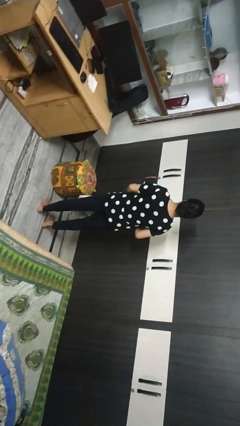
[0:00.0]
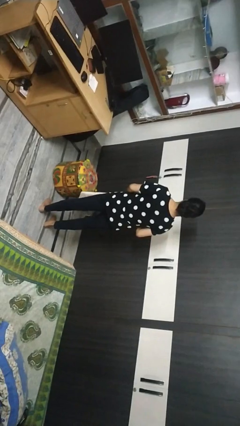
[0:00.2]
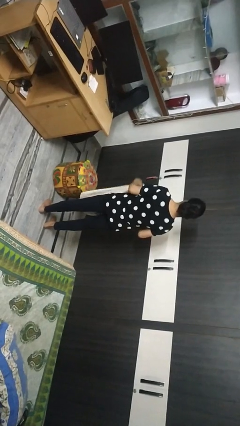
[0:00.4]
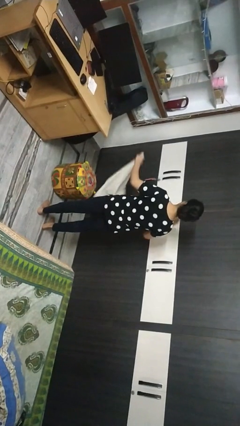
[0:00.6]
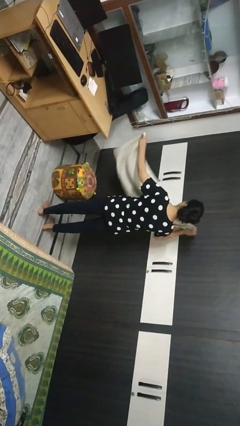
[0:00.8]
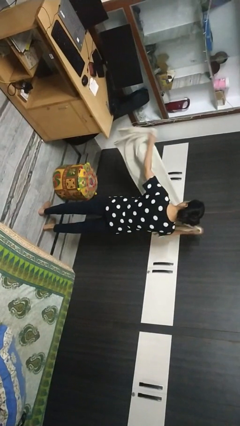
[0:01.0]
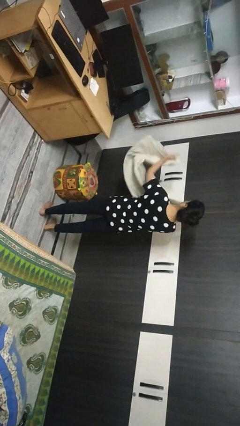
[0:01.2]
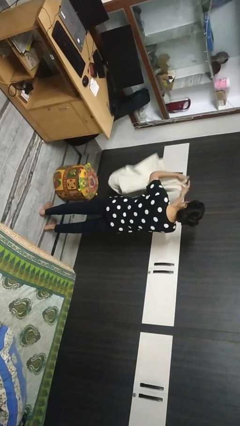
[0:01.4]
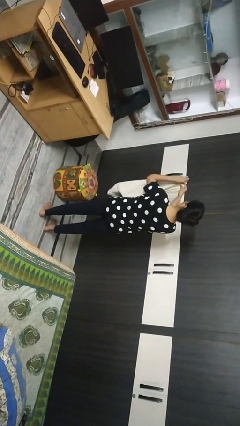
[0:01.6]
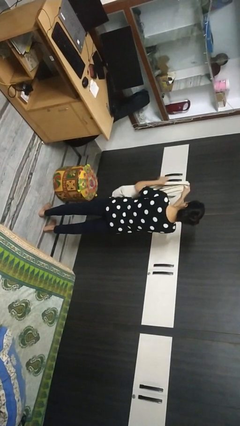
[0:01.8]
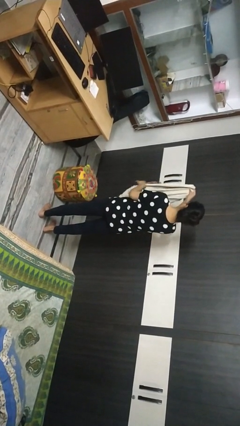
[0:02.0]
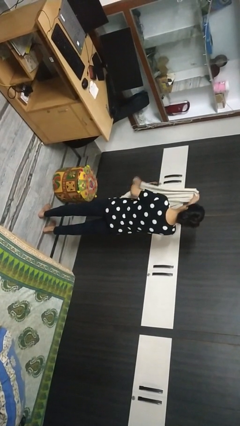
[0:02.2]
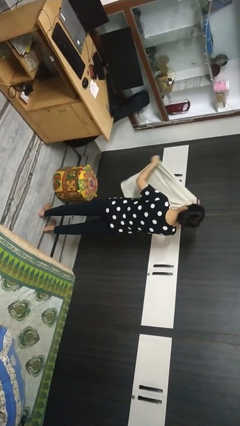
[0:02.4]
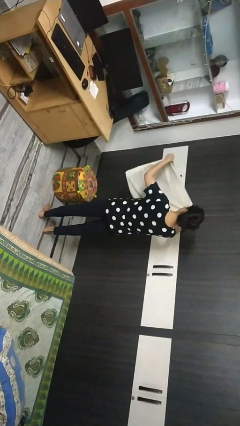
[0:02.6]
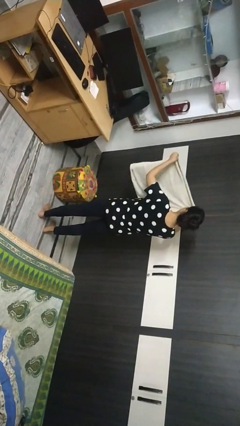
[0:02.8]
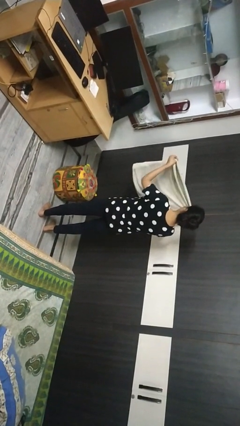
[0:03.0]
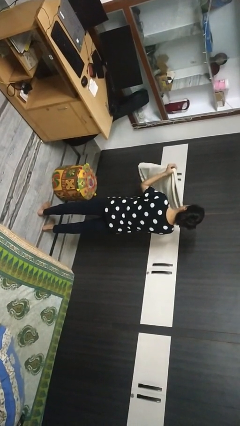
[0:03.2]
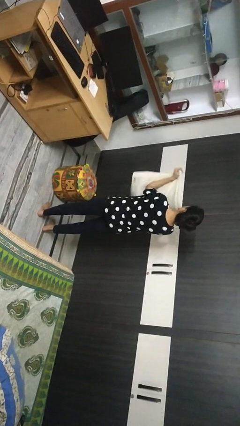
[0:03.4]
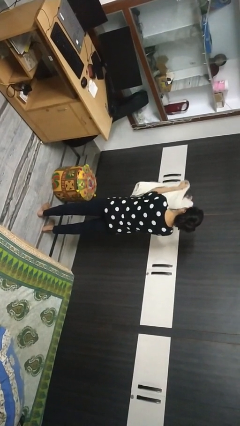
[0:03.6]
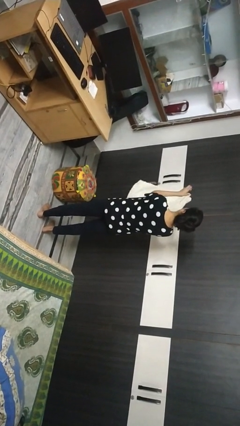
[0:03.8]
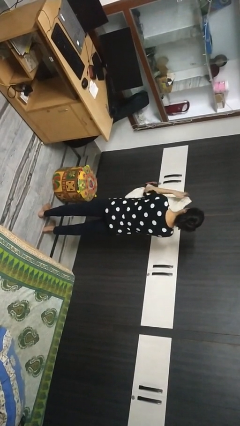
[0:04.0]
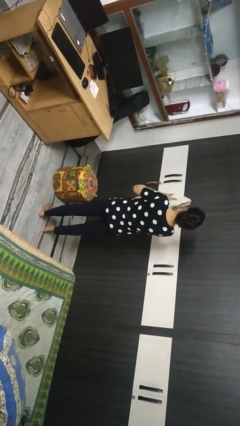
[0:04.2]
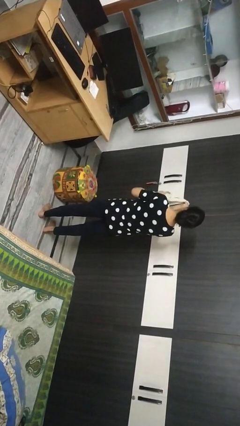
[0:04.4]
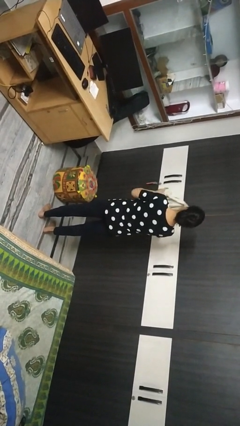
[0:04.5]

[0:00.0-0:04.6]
person folds blanket

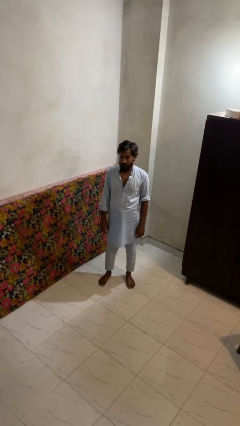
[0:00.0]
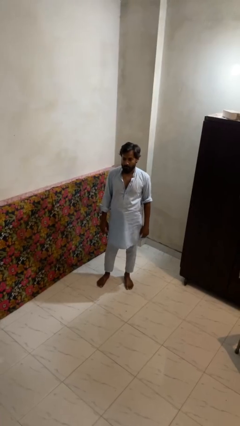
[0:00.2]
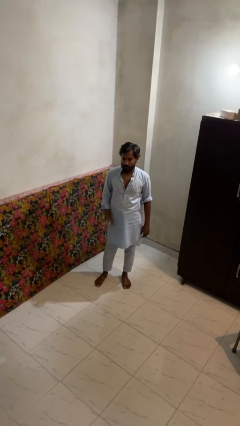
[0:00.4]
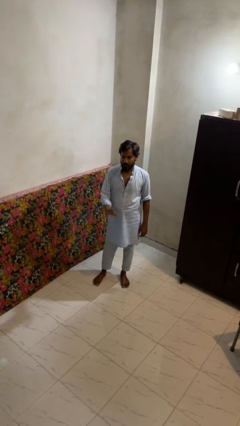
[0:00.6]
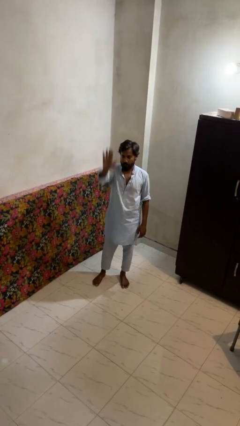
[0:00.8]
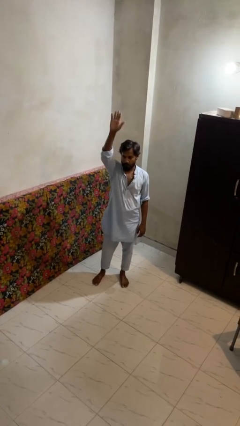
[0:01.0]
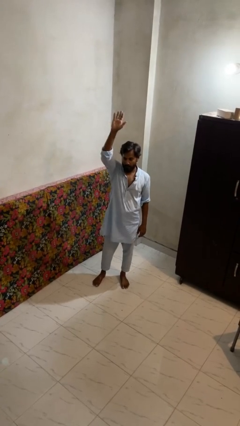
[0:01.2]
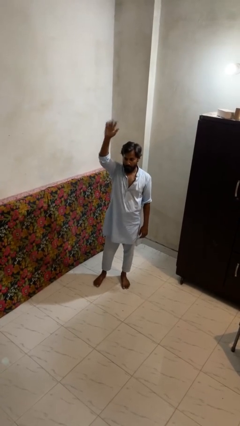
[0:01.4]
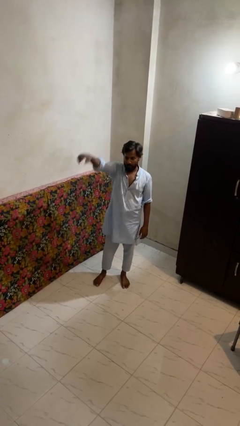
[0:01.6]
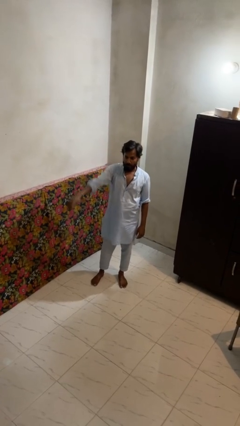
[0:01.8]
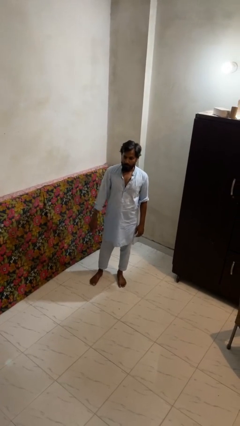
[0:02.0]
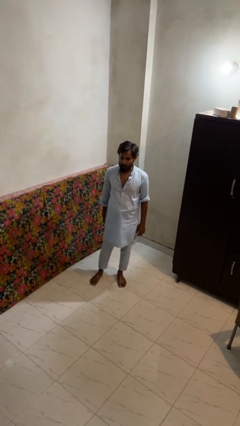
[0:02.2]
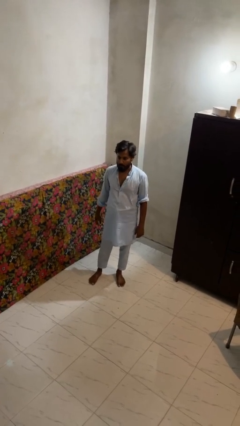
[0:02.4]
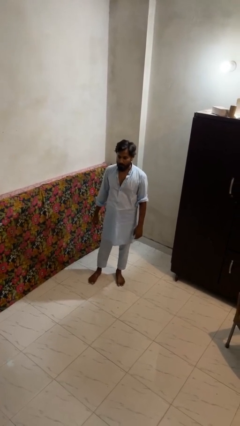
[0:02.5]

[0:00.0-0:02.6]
person gestures swipe up

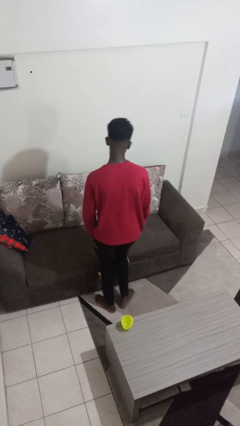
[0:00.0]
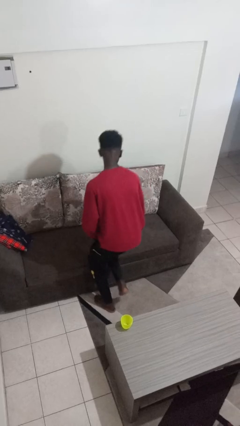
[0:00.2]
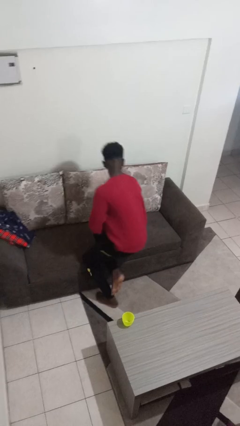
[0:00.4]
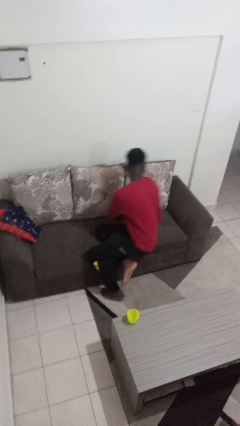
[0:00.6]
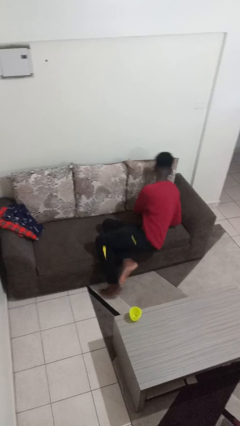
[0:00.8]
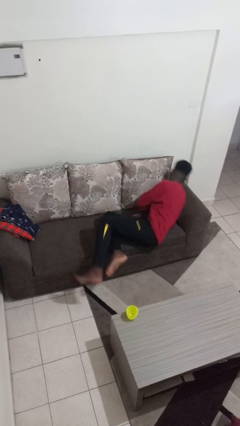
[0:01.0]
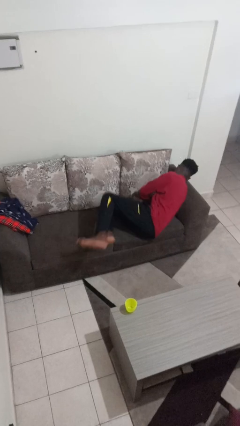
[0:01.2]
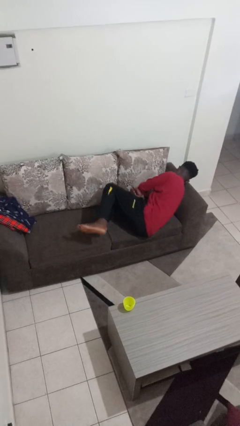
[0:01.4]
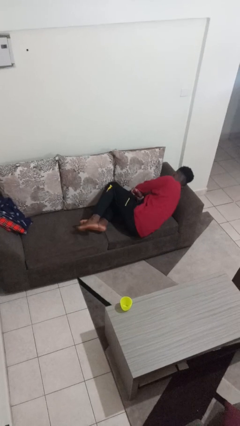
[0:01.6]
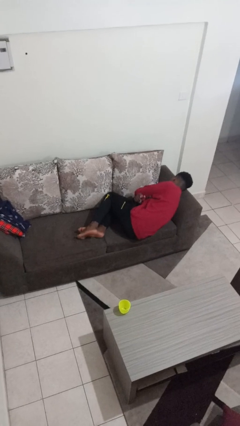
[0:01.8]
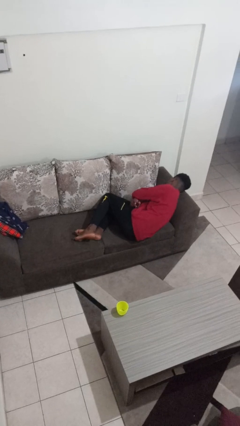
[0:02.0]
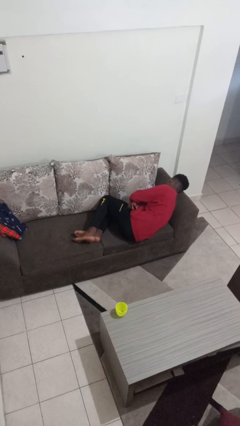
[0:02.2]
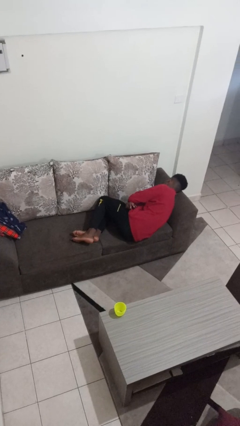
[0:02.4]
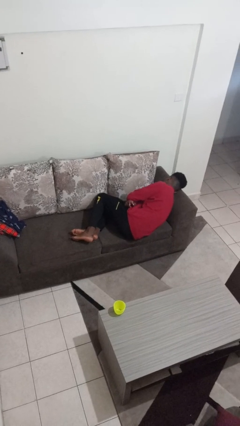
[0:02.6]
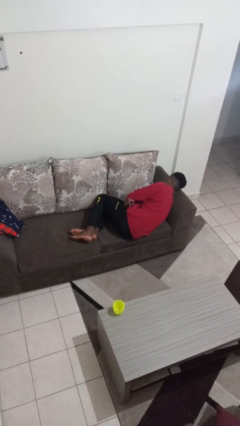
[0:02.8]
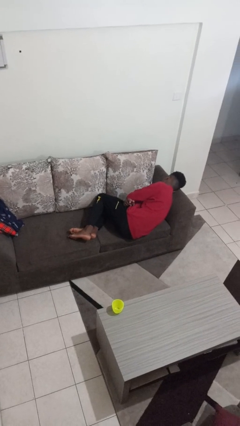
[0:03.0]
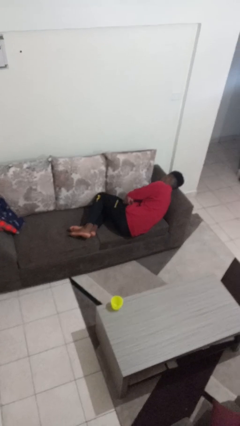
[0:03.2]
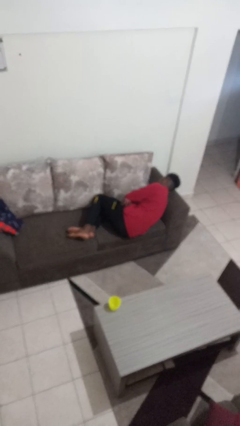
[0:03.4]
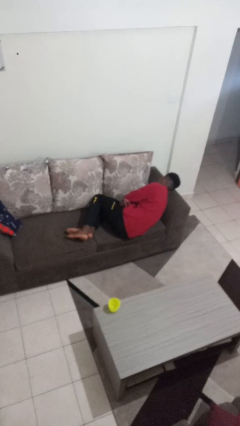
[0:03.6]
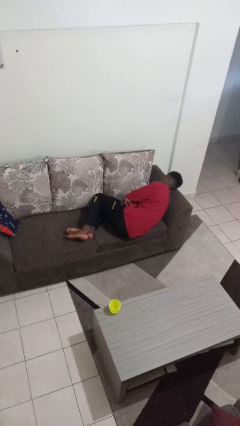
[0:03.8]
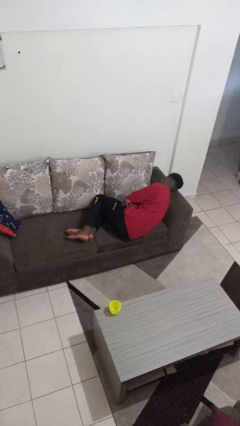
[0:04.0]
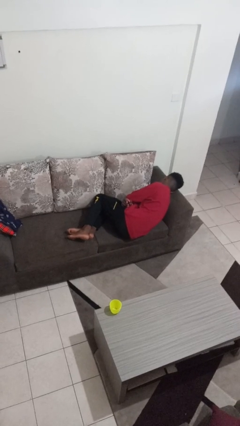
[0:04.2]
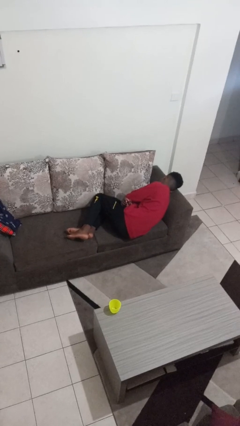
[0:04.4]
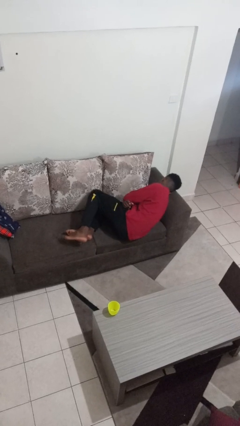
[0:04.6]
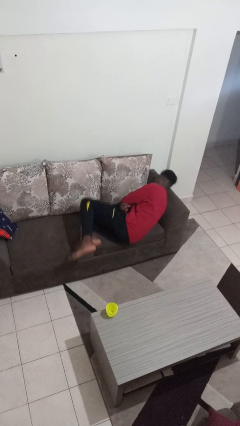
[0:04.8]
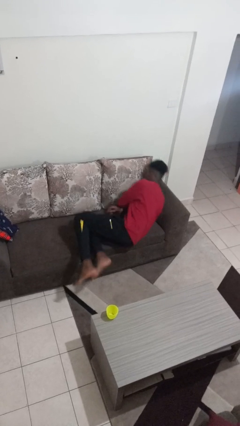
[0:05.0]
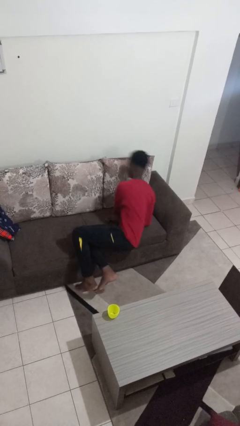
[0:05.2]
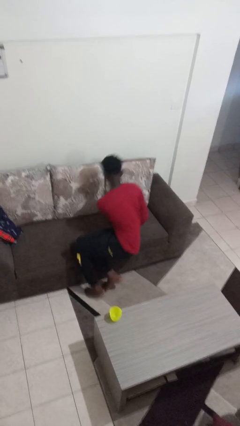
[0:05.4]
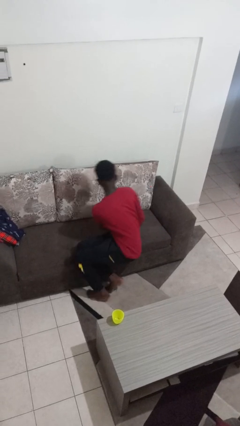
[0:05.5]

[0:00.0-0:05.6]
person lies down on couch

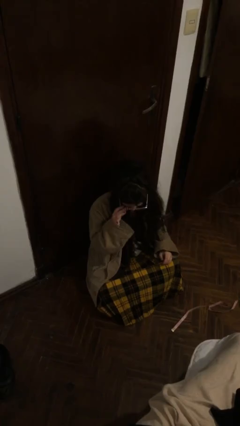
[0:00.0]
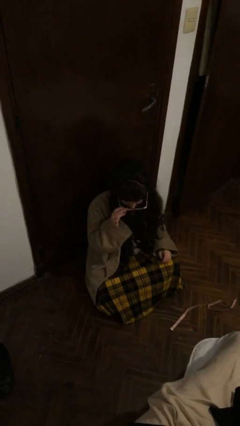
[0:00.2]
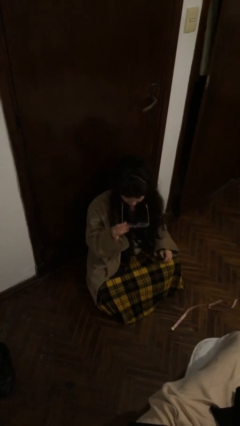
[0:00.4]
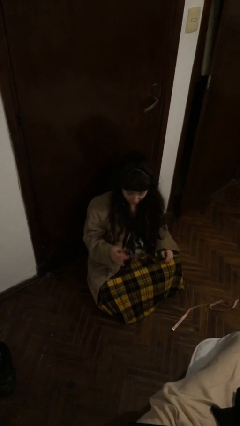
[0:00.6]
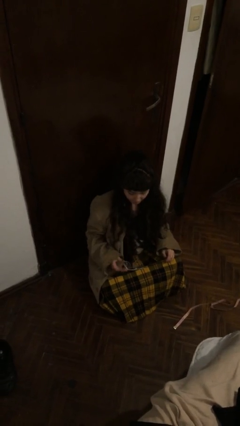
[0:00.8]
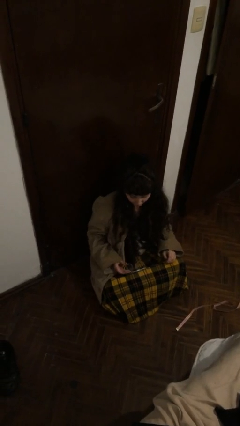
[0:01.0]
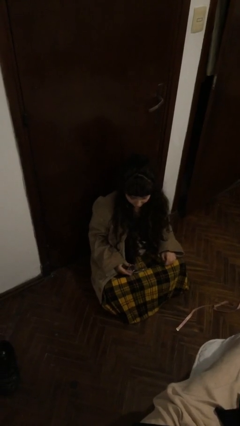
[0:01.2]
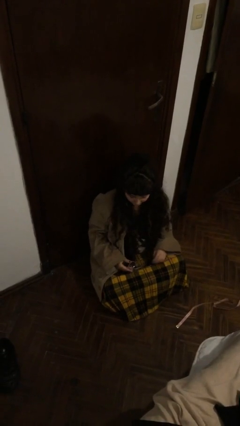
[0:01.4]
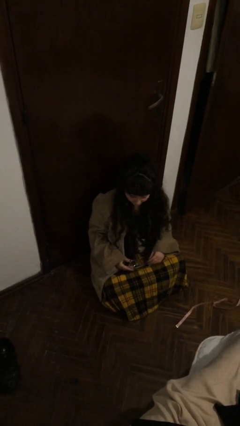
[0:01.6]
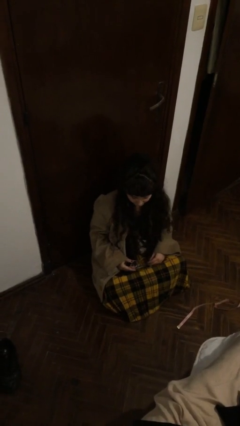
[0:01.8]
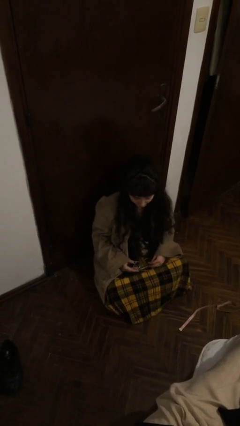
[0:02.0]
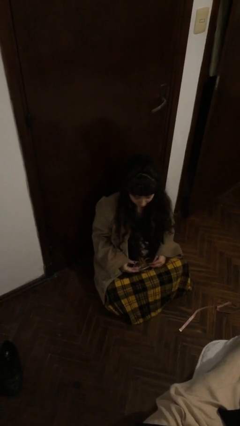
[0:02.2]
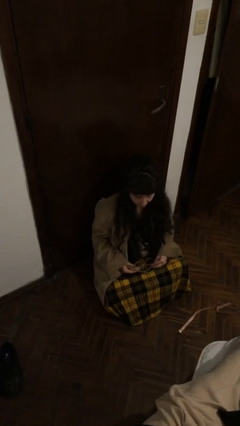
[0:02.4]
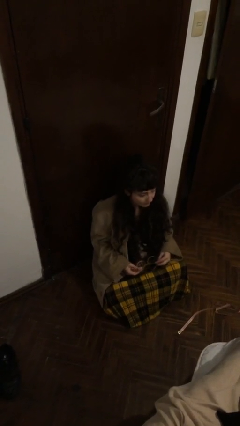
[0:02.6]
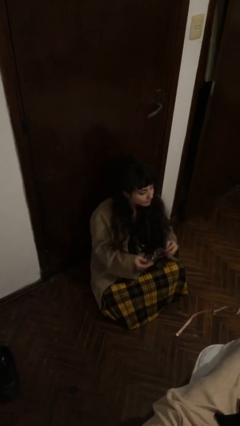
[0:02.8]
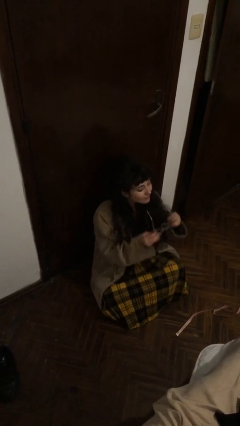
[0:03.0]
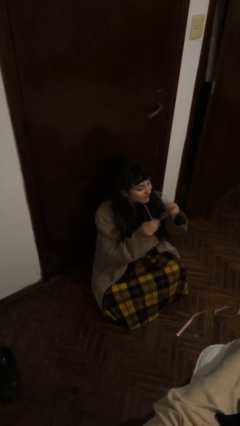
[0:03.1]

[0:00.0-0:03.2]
person takes off glasses

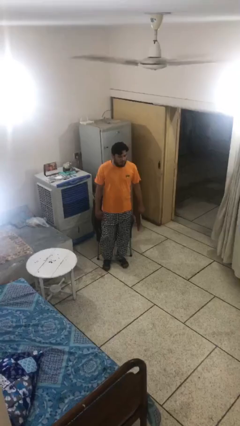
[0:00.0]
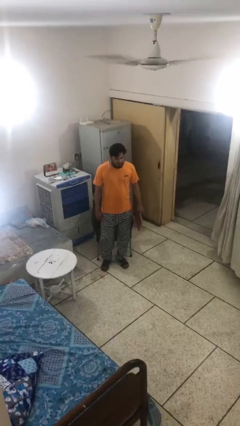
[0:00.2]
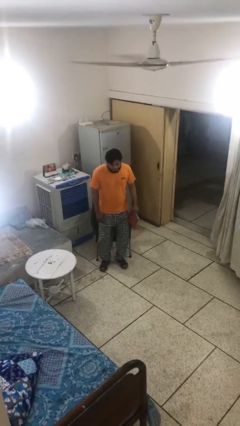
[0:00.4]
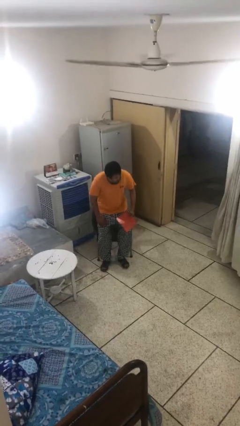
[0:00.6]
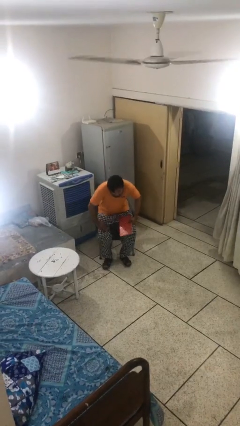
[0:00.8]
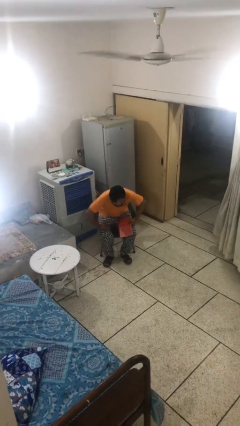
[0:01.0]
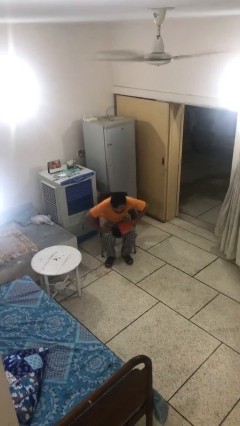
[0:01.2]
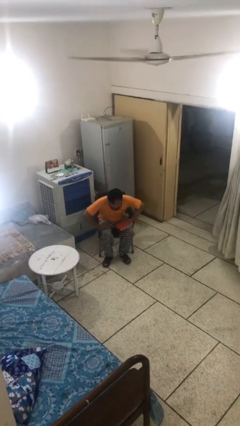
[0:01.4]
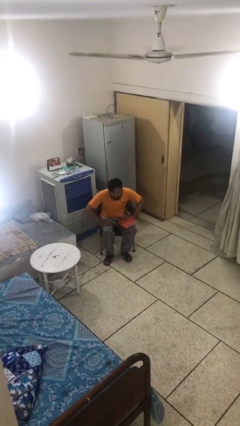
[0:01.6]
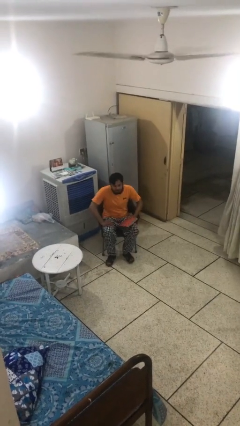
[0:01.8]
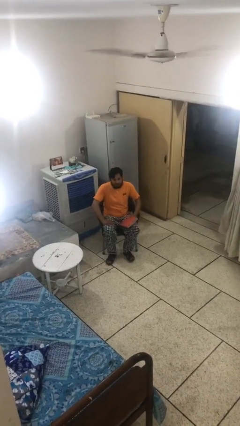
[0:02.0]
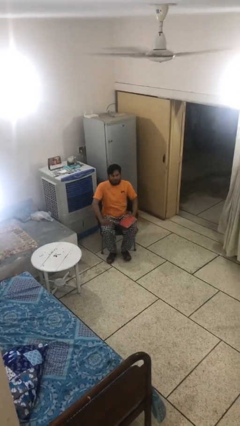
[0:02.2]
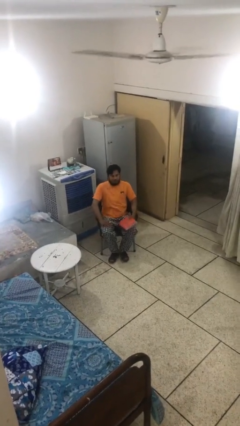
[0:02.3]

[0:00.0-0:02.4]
person sits down
